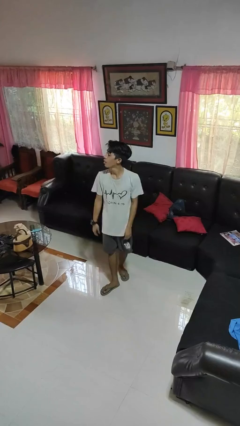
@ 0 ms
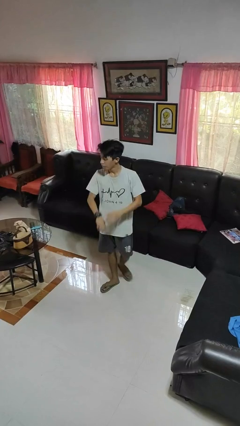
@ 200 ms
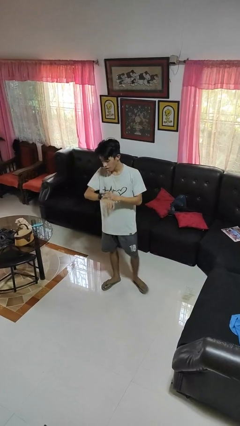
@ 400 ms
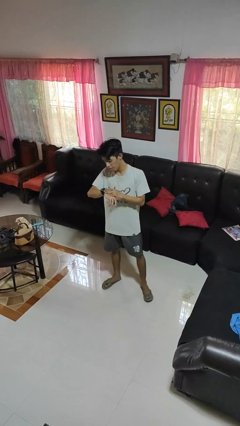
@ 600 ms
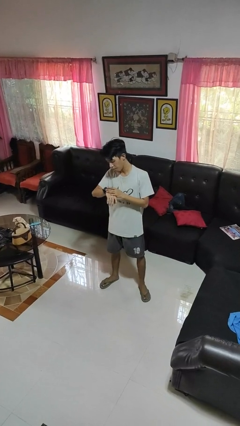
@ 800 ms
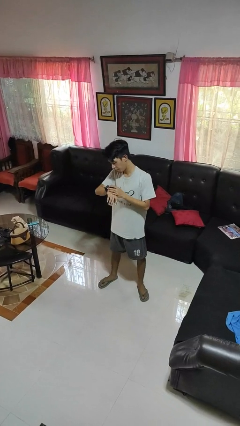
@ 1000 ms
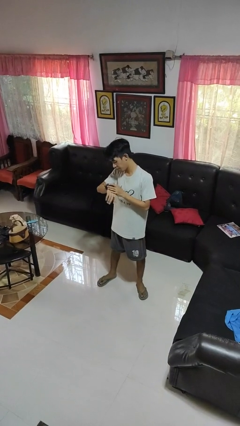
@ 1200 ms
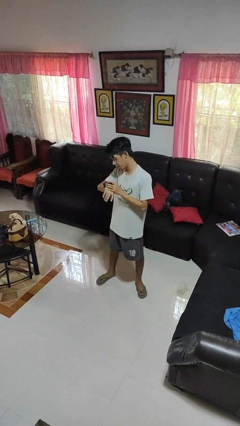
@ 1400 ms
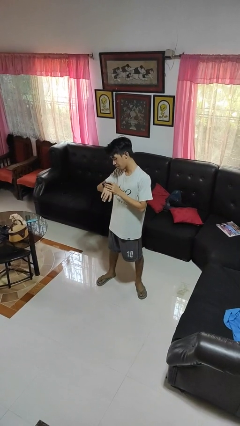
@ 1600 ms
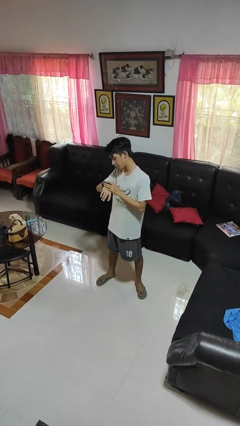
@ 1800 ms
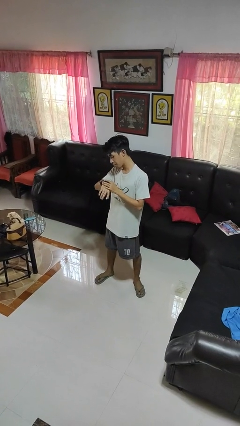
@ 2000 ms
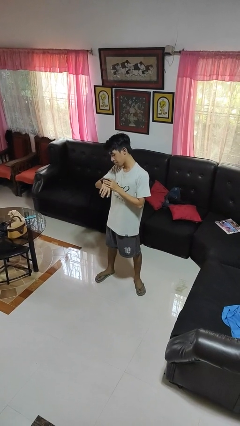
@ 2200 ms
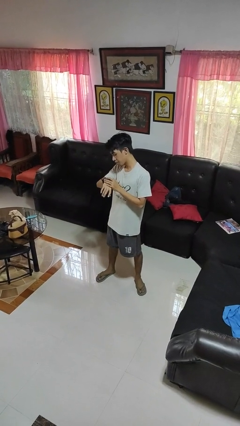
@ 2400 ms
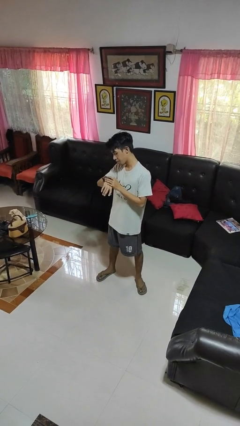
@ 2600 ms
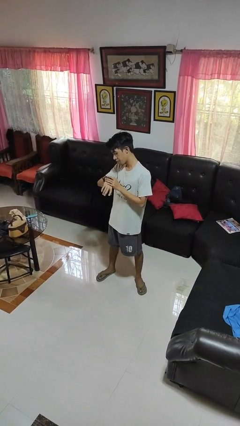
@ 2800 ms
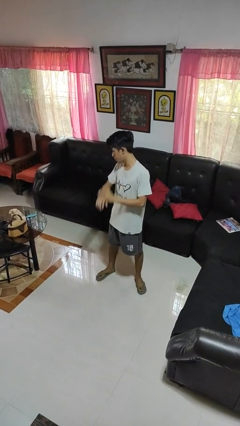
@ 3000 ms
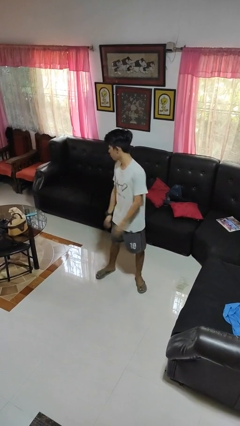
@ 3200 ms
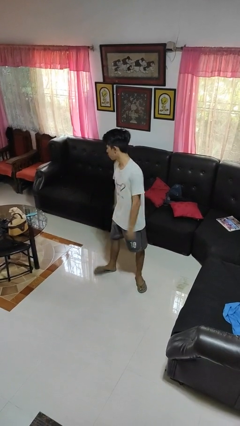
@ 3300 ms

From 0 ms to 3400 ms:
person looks at wristwatch

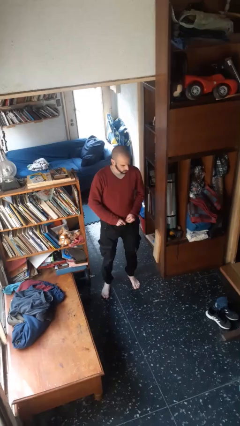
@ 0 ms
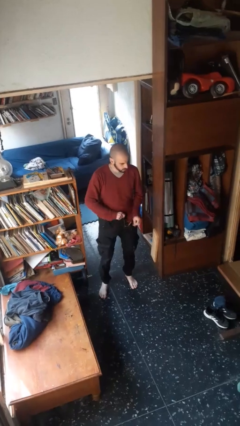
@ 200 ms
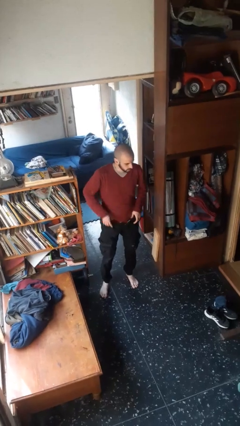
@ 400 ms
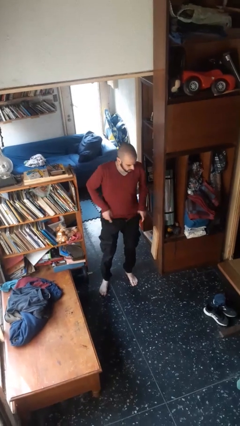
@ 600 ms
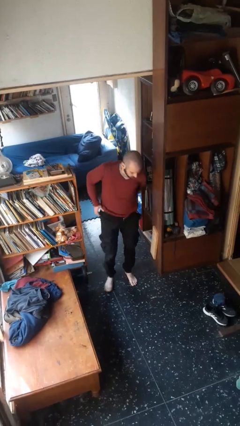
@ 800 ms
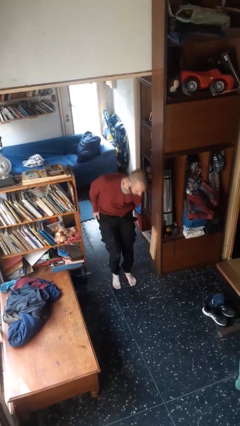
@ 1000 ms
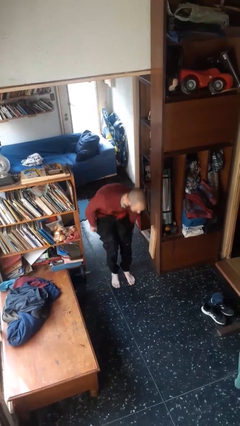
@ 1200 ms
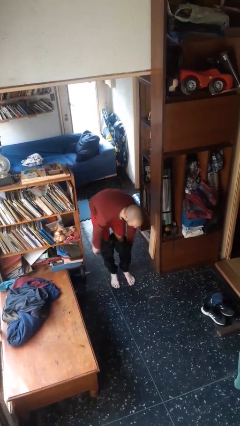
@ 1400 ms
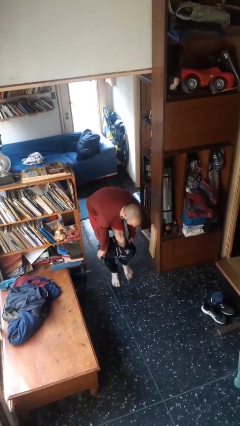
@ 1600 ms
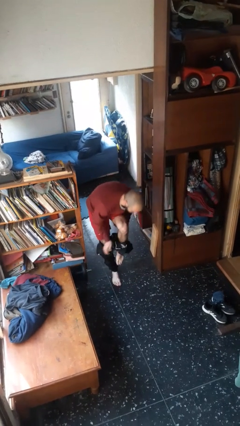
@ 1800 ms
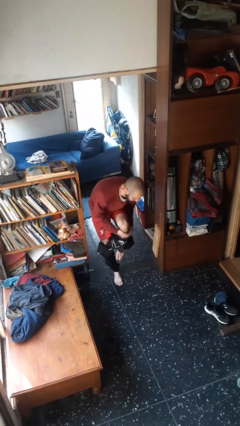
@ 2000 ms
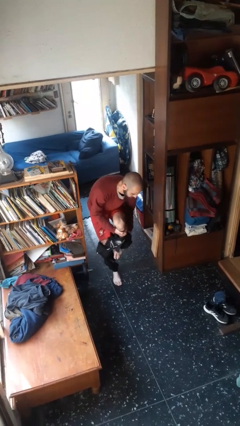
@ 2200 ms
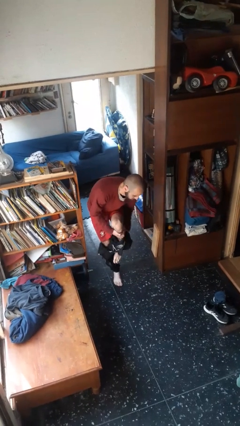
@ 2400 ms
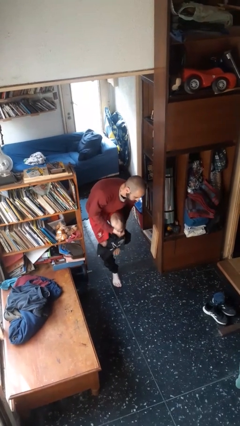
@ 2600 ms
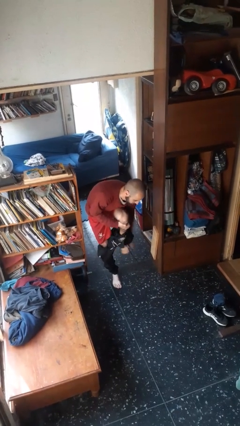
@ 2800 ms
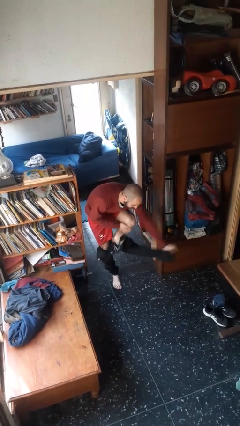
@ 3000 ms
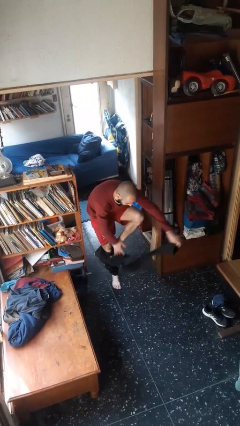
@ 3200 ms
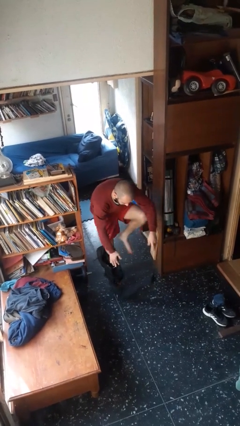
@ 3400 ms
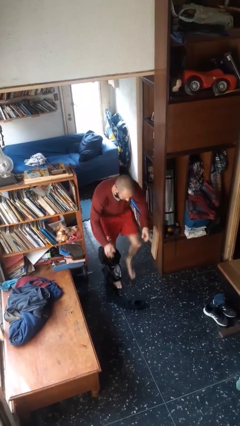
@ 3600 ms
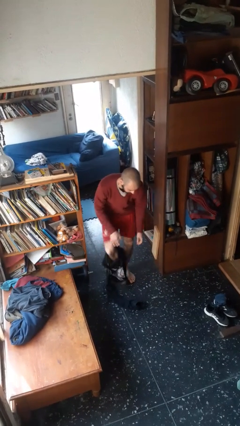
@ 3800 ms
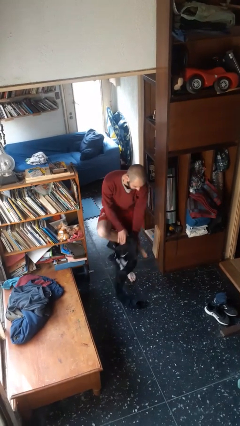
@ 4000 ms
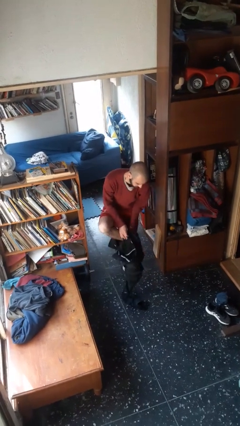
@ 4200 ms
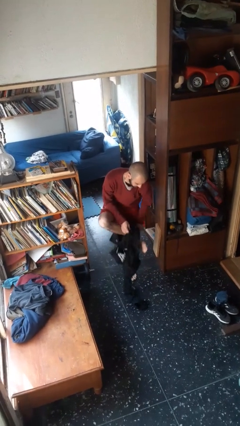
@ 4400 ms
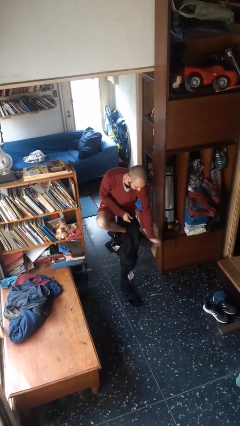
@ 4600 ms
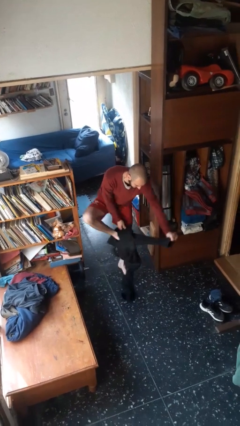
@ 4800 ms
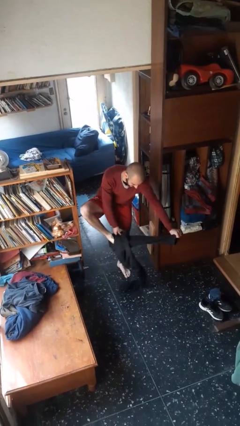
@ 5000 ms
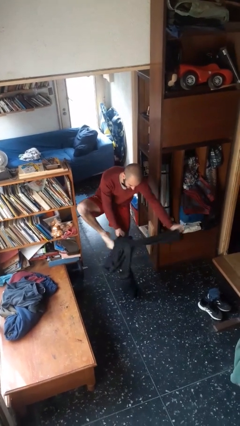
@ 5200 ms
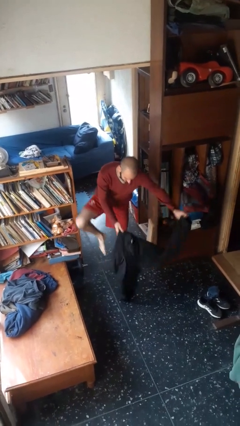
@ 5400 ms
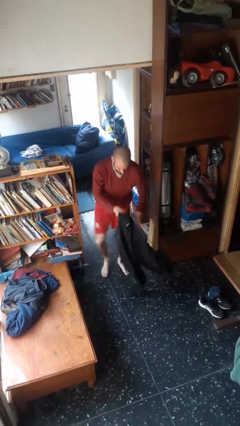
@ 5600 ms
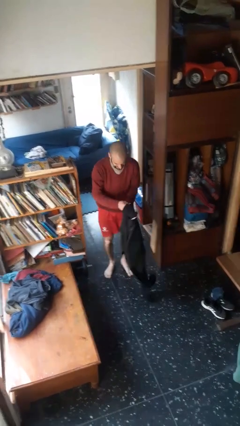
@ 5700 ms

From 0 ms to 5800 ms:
person takes off pants

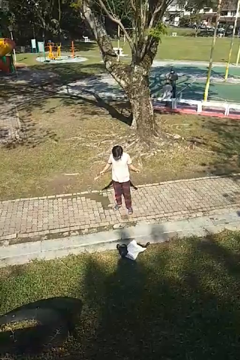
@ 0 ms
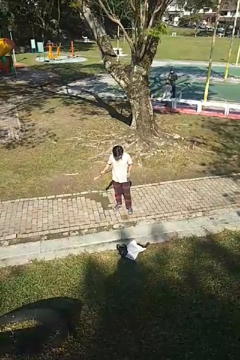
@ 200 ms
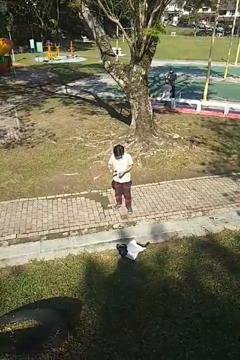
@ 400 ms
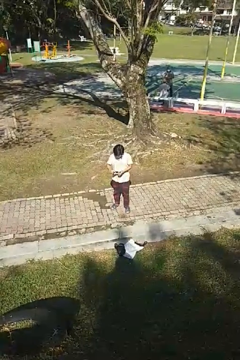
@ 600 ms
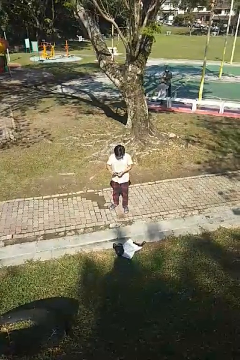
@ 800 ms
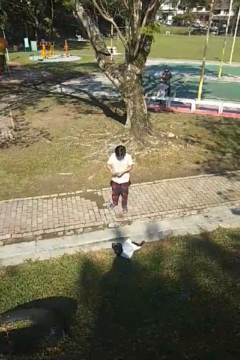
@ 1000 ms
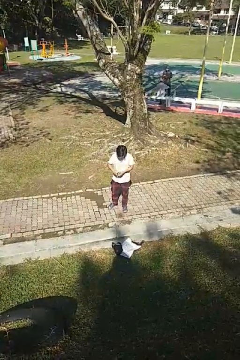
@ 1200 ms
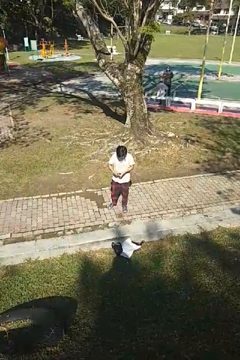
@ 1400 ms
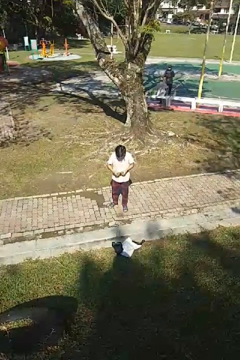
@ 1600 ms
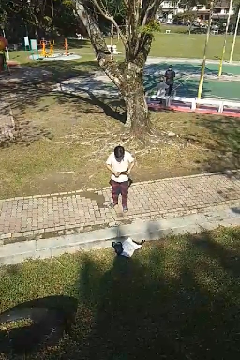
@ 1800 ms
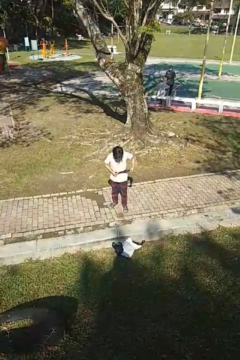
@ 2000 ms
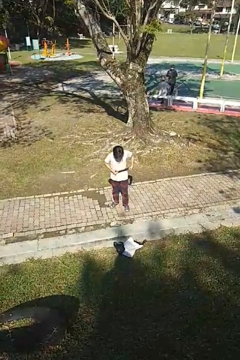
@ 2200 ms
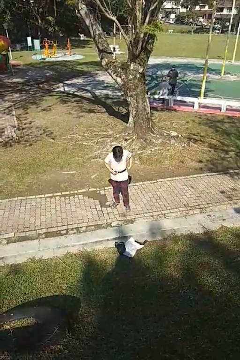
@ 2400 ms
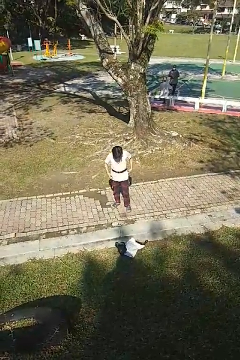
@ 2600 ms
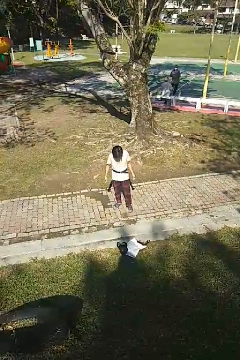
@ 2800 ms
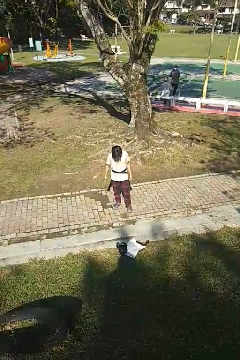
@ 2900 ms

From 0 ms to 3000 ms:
person puts on belt

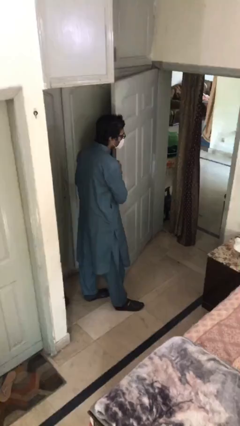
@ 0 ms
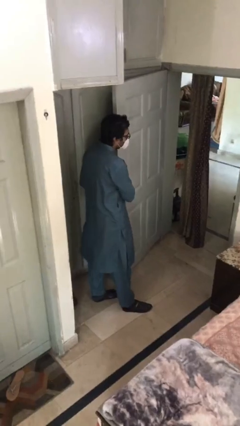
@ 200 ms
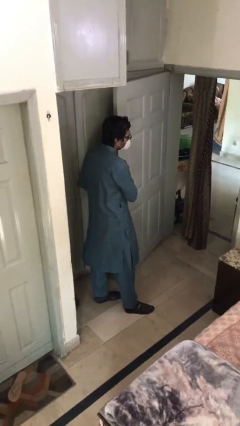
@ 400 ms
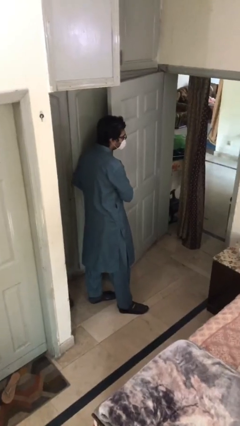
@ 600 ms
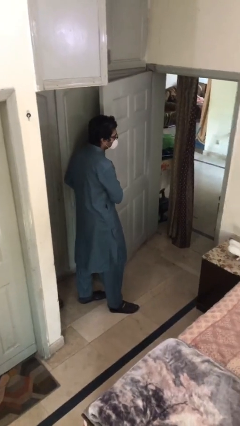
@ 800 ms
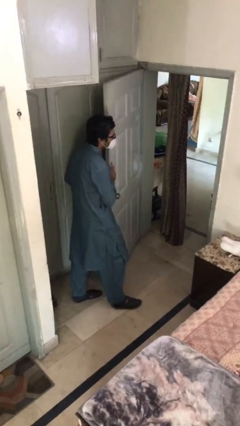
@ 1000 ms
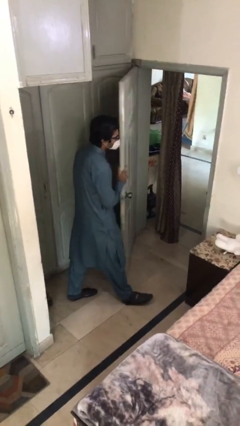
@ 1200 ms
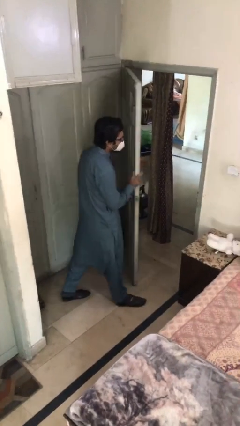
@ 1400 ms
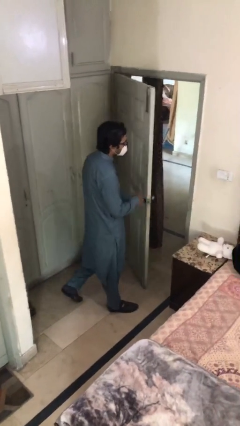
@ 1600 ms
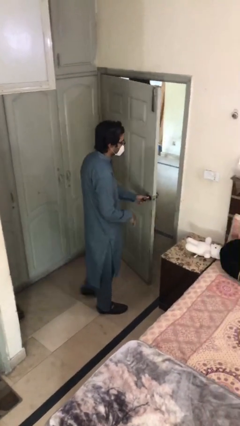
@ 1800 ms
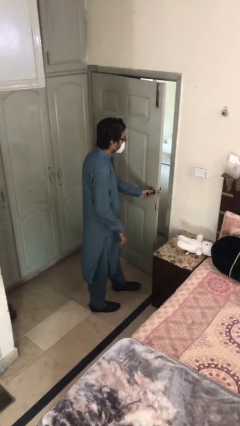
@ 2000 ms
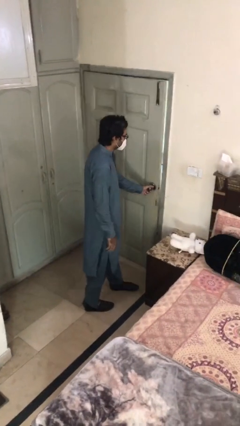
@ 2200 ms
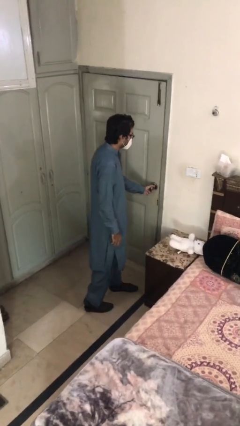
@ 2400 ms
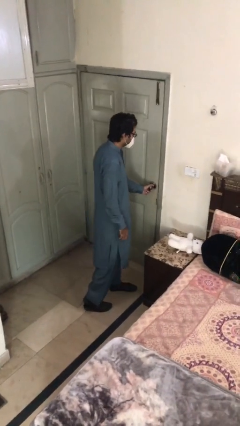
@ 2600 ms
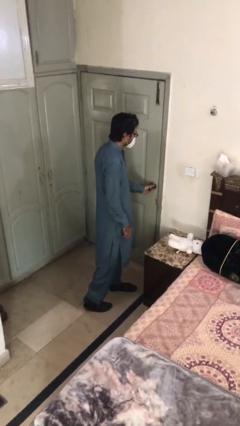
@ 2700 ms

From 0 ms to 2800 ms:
person closes facility door

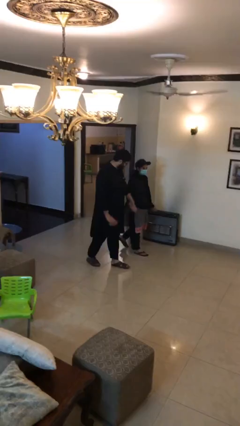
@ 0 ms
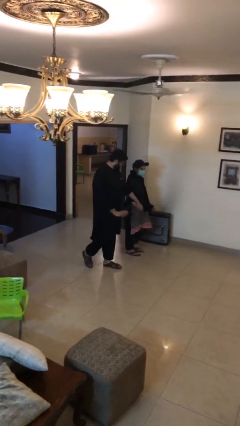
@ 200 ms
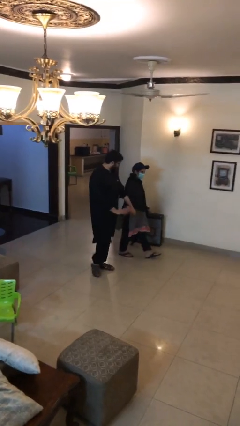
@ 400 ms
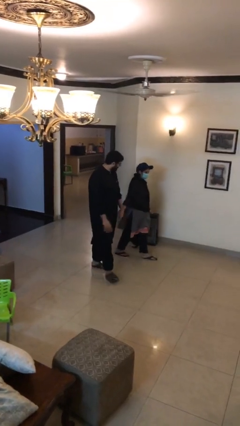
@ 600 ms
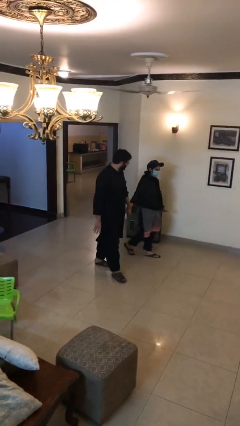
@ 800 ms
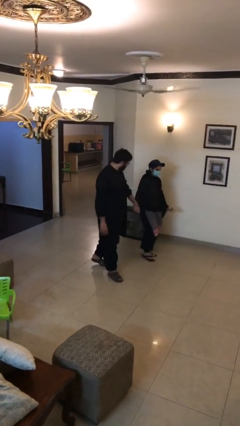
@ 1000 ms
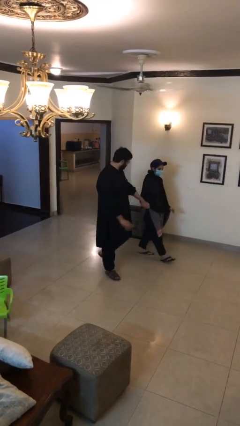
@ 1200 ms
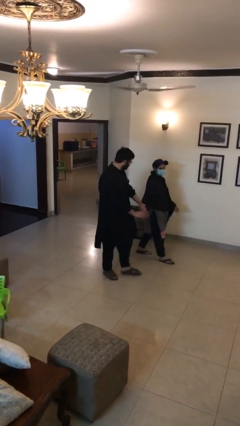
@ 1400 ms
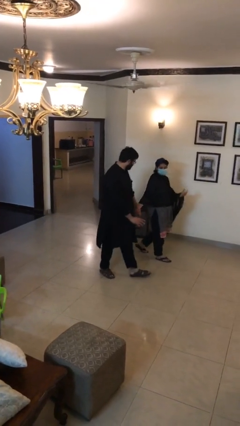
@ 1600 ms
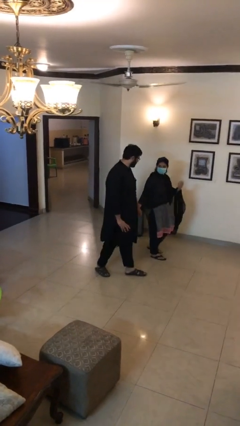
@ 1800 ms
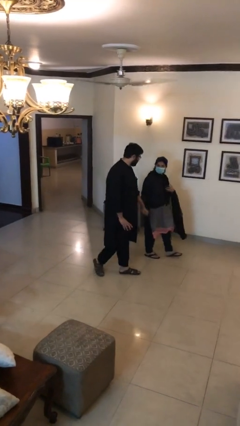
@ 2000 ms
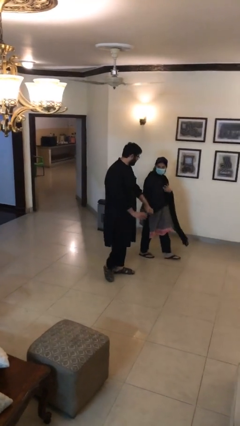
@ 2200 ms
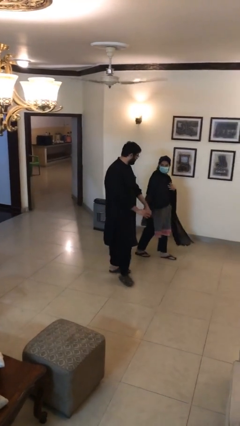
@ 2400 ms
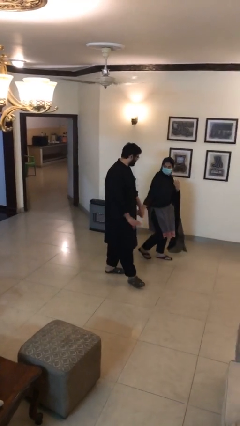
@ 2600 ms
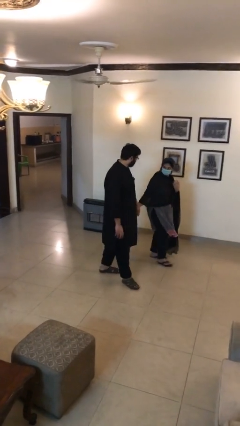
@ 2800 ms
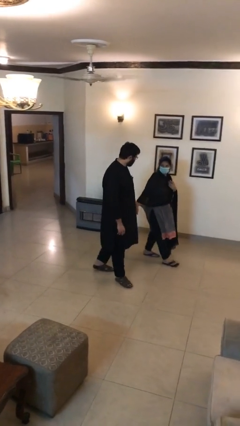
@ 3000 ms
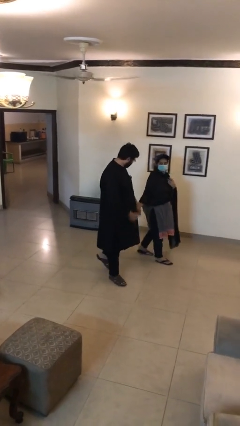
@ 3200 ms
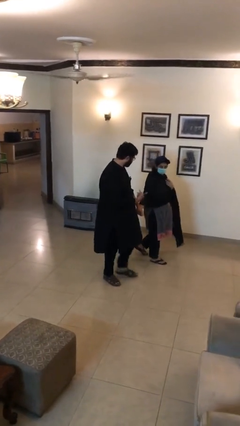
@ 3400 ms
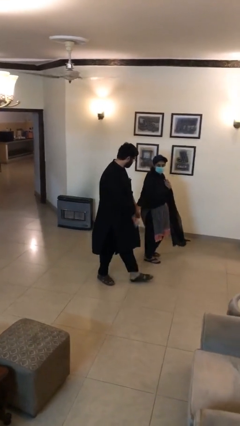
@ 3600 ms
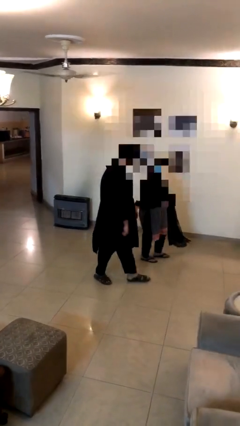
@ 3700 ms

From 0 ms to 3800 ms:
person holds hand
